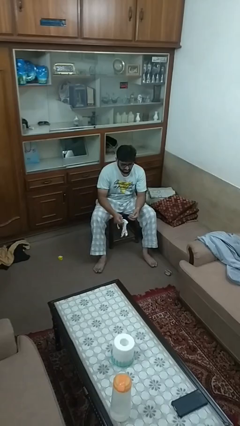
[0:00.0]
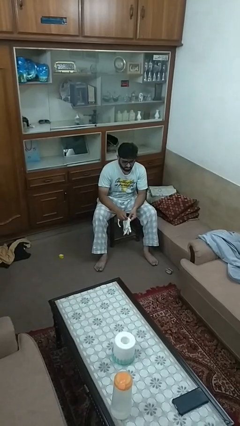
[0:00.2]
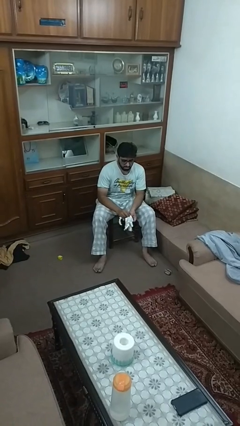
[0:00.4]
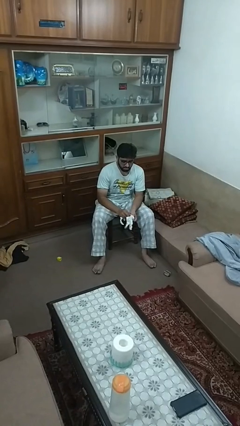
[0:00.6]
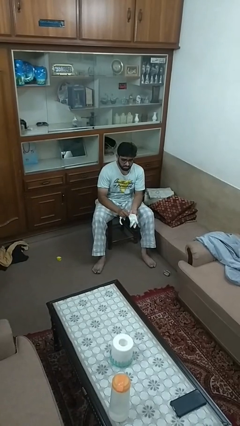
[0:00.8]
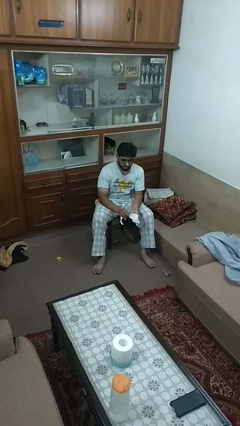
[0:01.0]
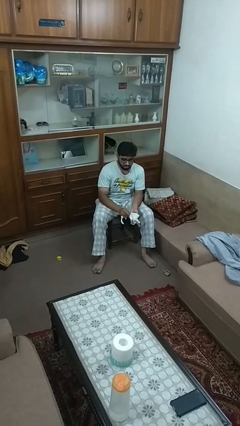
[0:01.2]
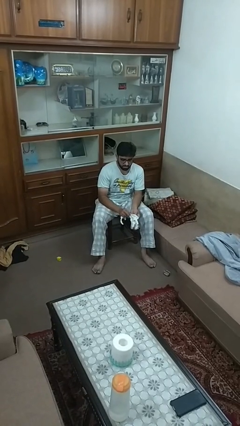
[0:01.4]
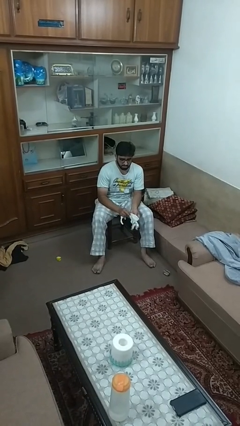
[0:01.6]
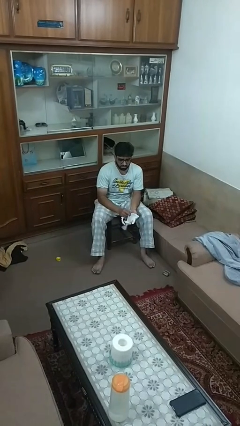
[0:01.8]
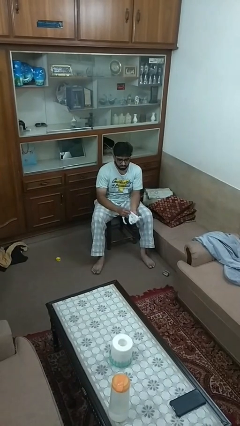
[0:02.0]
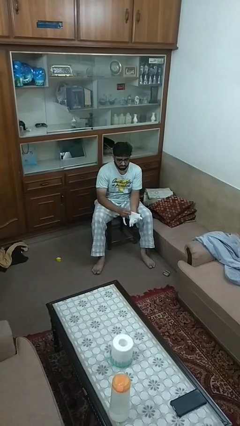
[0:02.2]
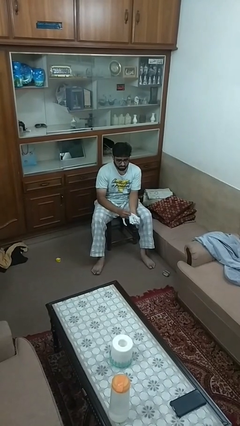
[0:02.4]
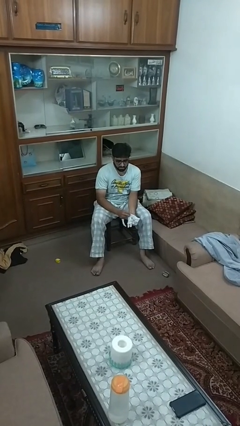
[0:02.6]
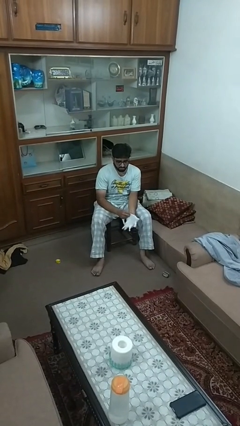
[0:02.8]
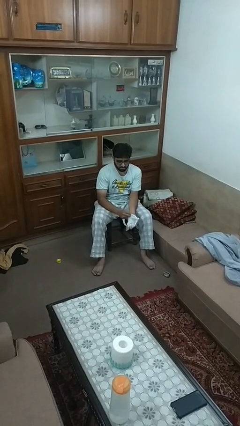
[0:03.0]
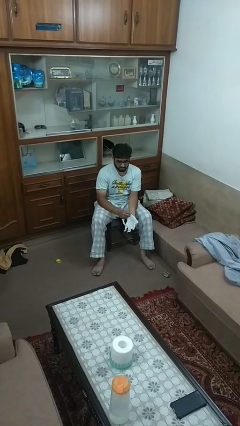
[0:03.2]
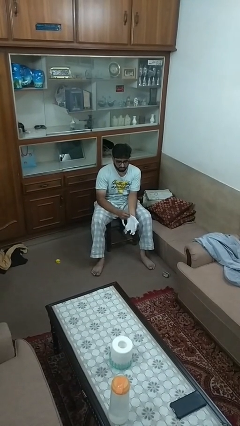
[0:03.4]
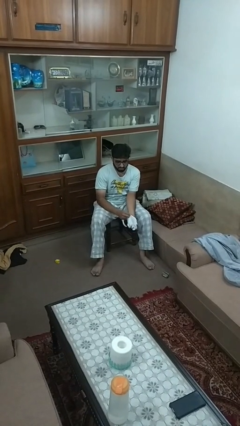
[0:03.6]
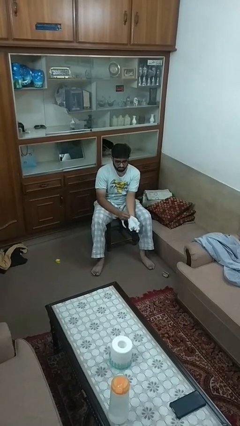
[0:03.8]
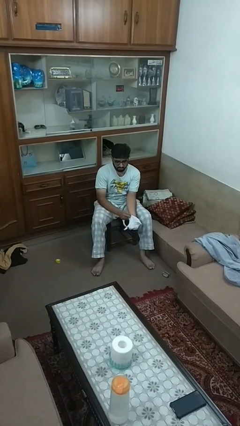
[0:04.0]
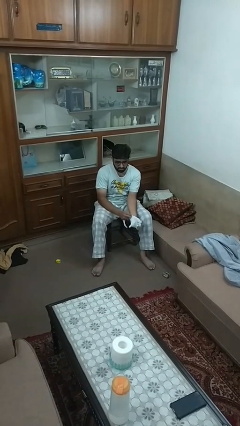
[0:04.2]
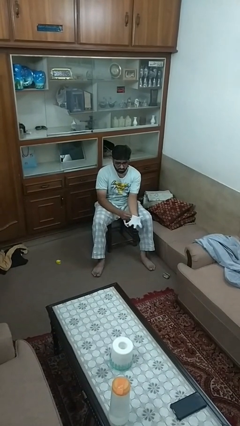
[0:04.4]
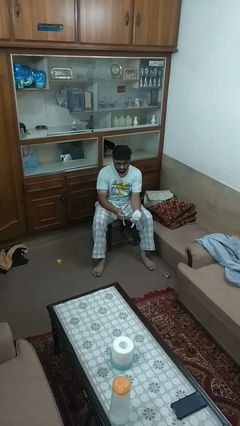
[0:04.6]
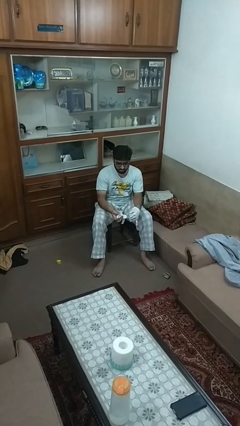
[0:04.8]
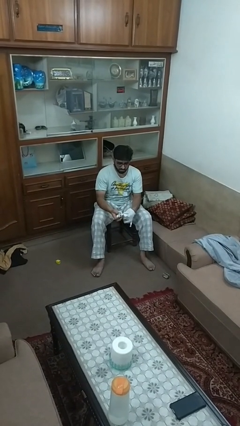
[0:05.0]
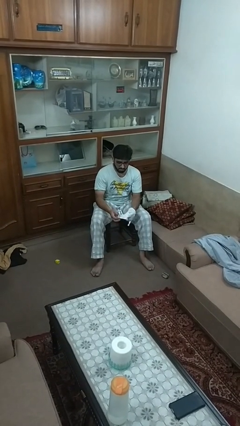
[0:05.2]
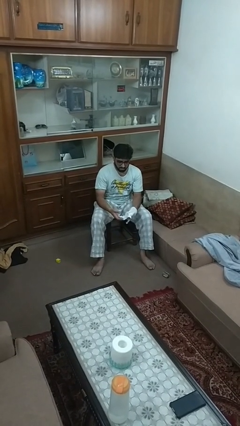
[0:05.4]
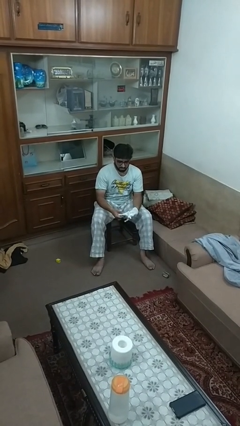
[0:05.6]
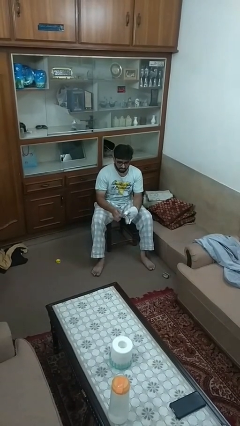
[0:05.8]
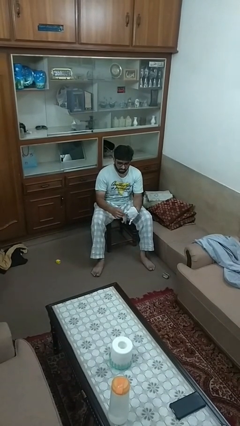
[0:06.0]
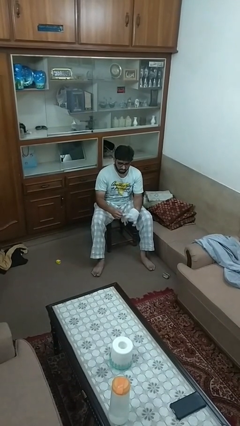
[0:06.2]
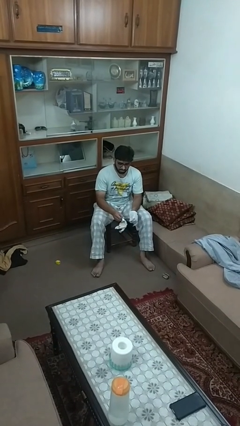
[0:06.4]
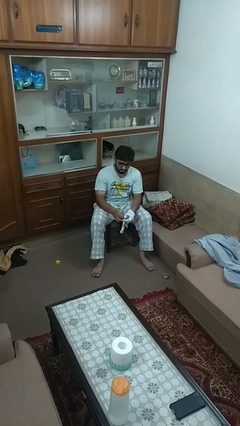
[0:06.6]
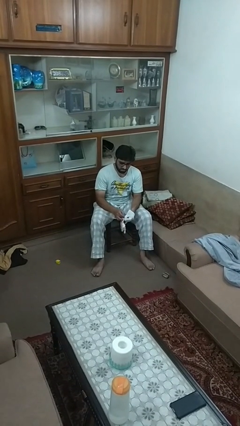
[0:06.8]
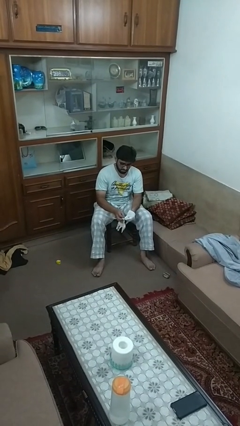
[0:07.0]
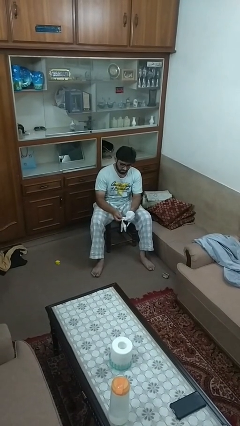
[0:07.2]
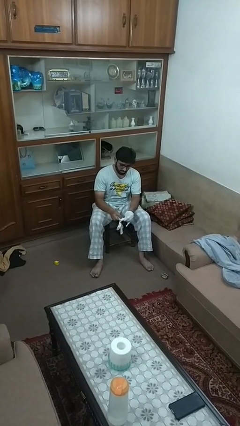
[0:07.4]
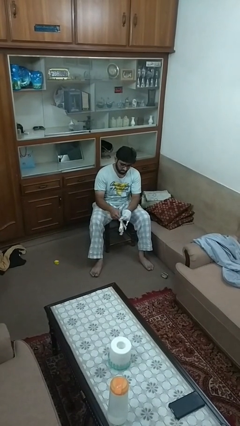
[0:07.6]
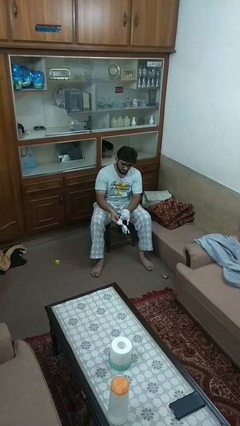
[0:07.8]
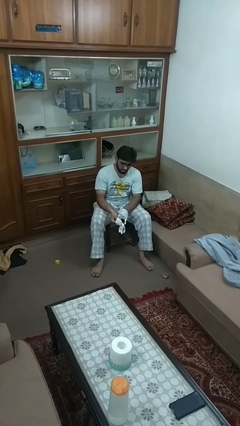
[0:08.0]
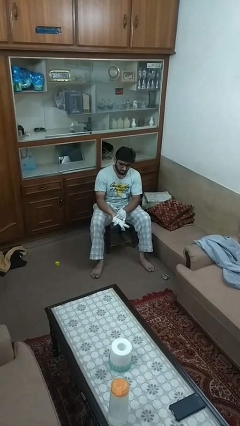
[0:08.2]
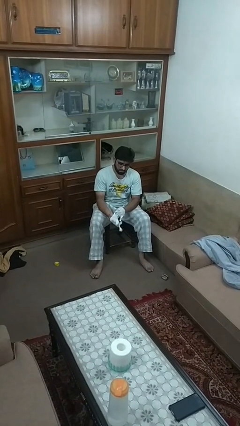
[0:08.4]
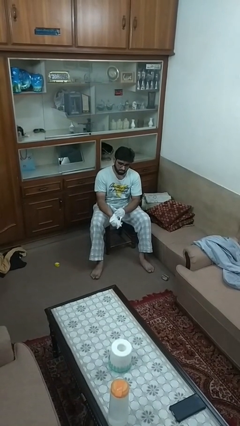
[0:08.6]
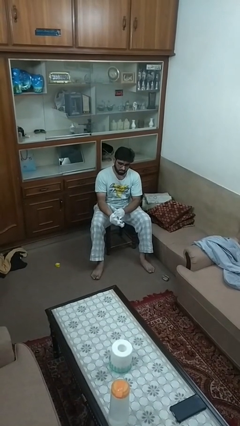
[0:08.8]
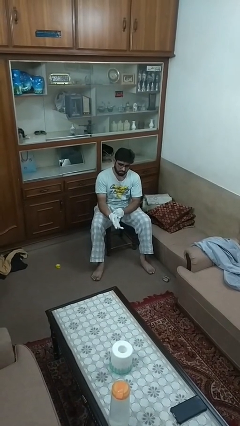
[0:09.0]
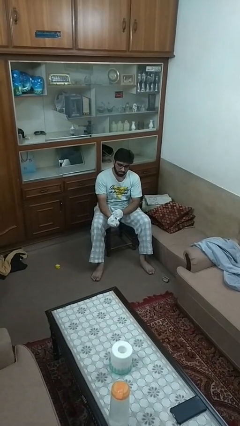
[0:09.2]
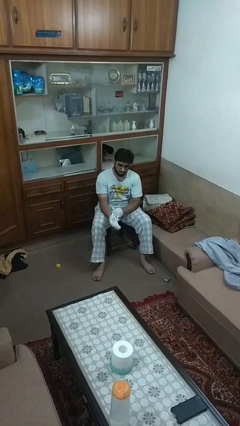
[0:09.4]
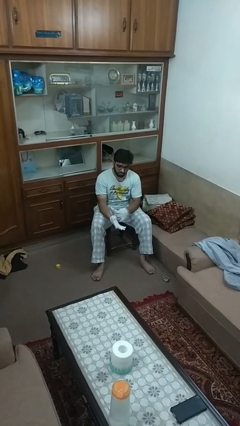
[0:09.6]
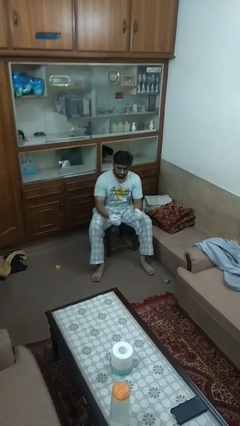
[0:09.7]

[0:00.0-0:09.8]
person puts on gloves

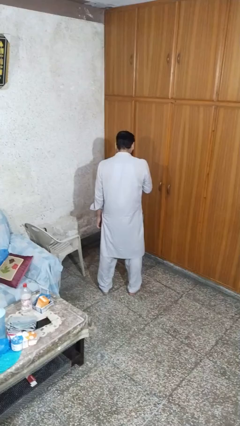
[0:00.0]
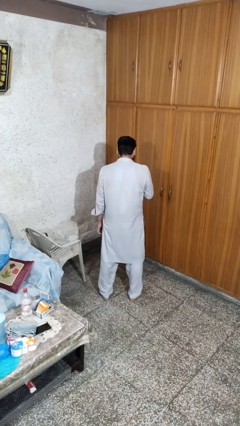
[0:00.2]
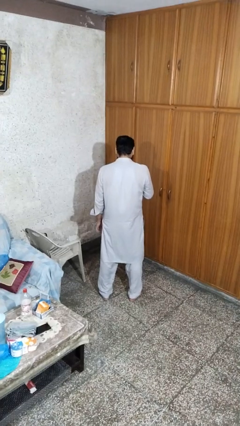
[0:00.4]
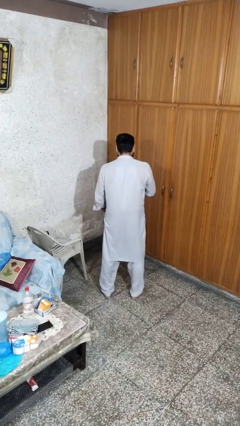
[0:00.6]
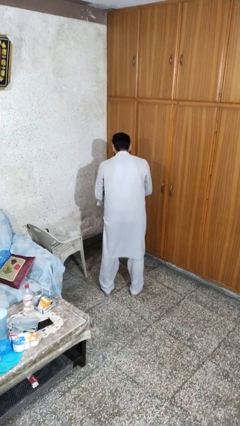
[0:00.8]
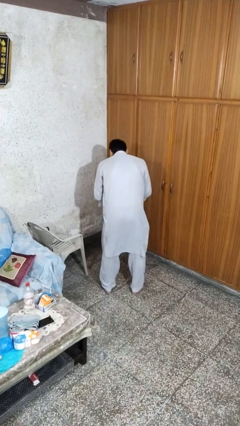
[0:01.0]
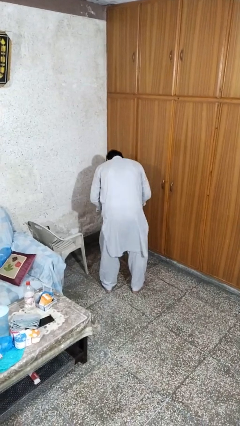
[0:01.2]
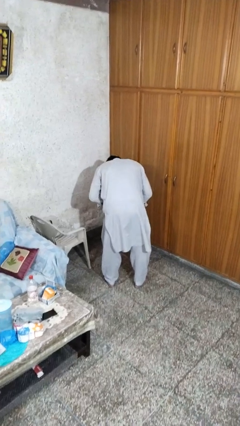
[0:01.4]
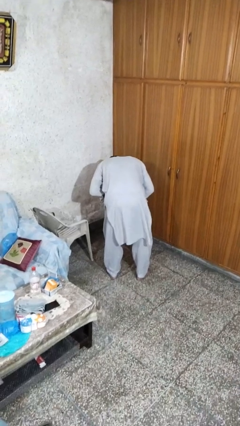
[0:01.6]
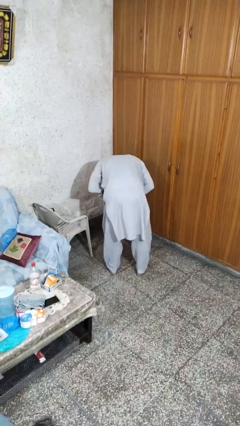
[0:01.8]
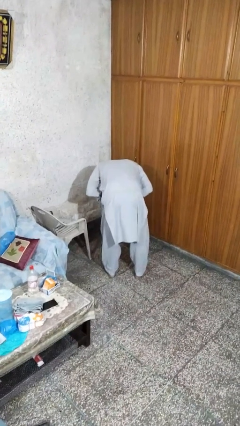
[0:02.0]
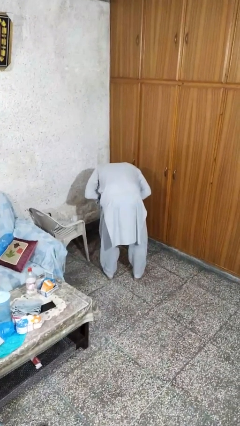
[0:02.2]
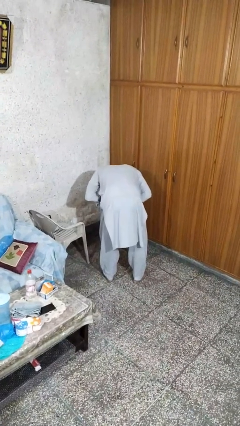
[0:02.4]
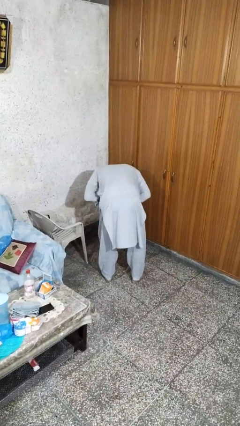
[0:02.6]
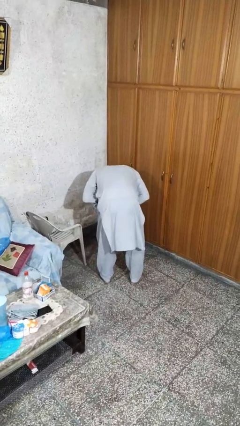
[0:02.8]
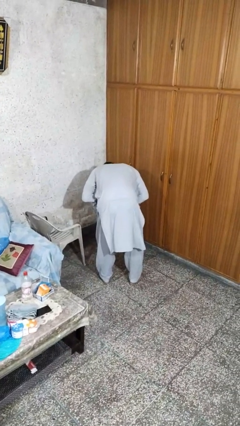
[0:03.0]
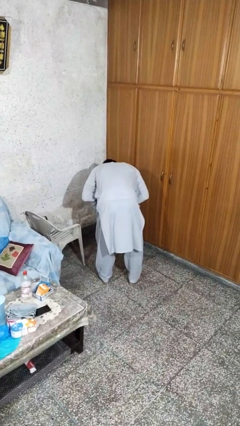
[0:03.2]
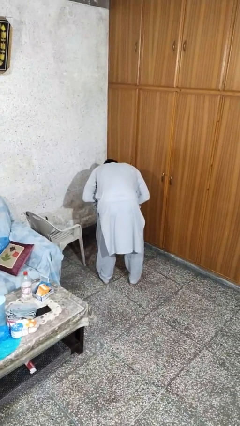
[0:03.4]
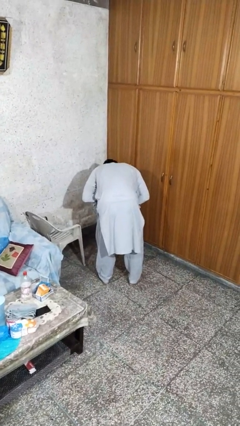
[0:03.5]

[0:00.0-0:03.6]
person bows

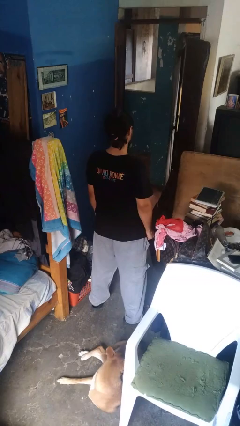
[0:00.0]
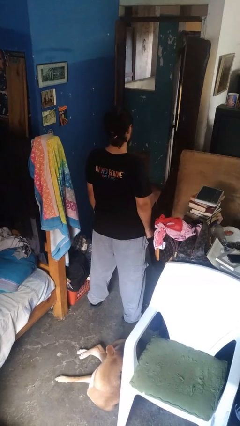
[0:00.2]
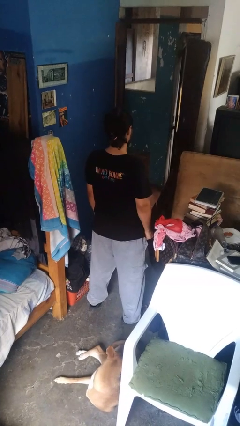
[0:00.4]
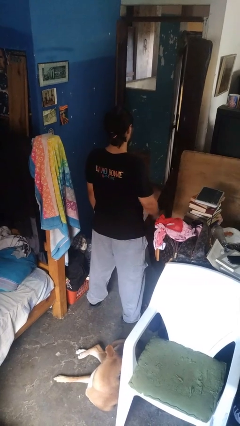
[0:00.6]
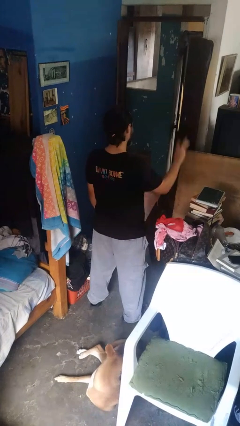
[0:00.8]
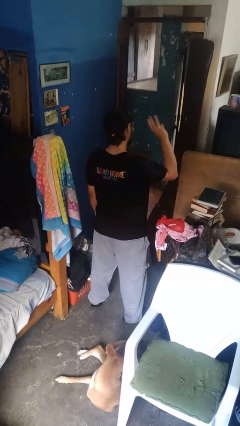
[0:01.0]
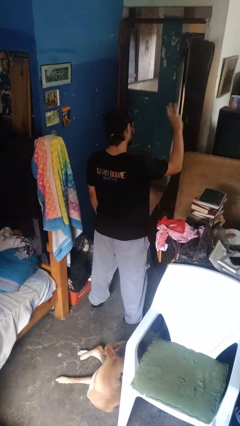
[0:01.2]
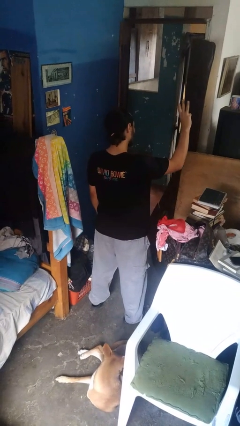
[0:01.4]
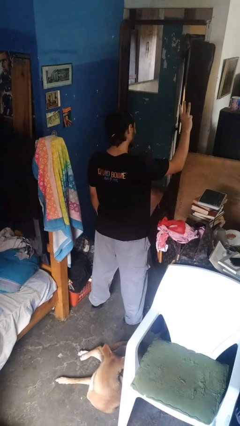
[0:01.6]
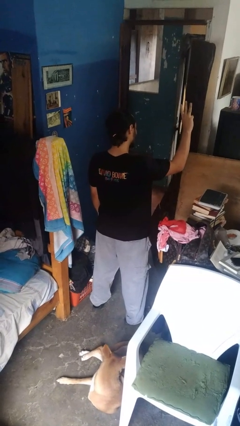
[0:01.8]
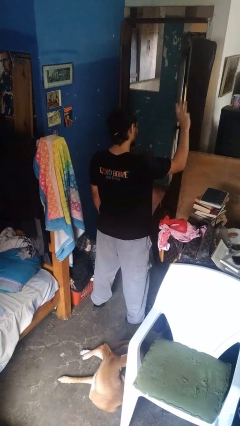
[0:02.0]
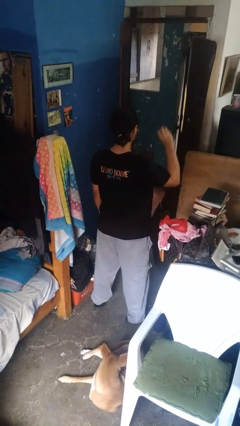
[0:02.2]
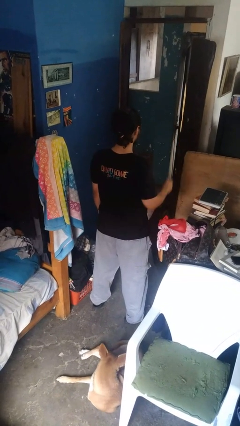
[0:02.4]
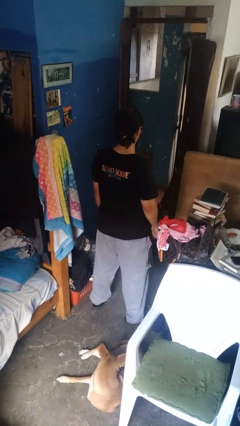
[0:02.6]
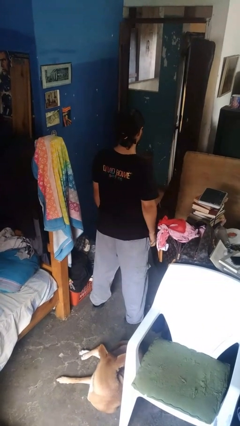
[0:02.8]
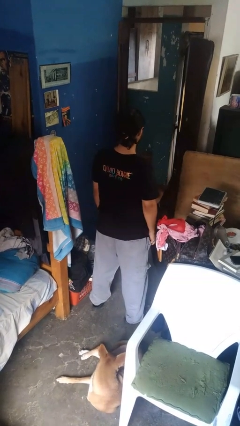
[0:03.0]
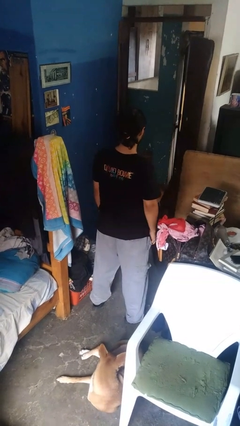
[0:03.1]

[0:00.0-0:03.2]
person gestures number three

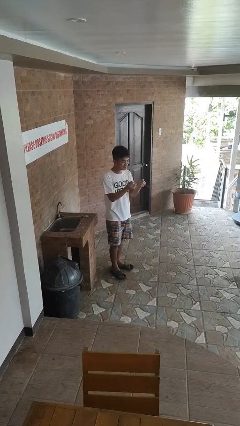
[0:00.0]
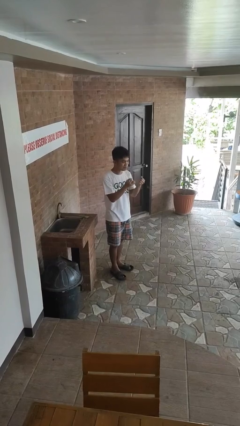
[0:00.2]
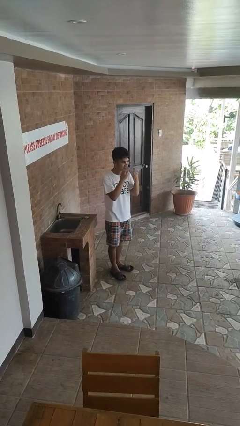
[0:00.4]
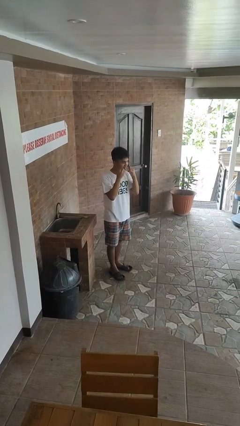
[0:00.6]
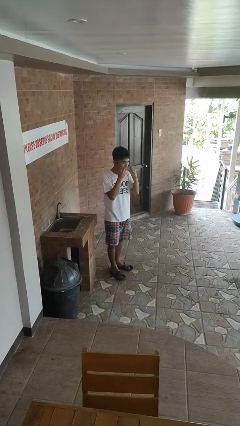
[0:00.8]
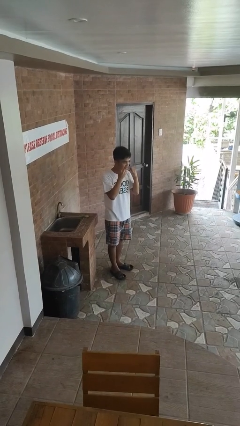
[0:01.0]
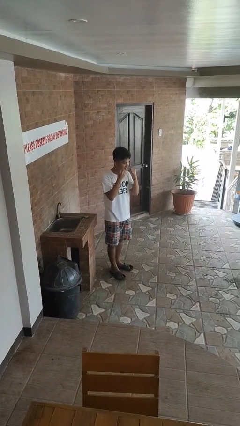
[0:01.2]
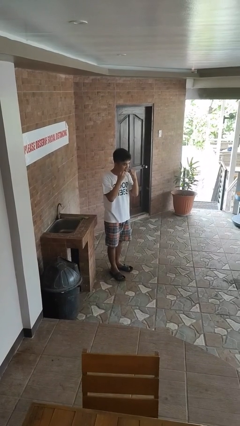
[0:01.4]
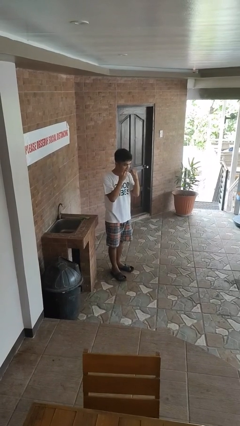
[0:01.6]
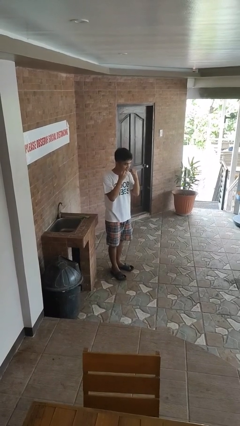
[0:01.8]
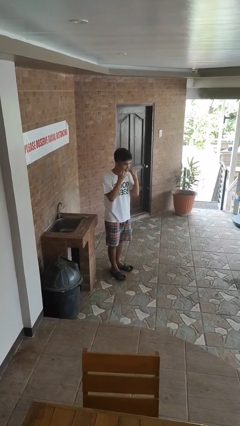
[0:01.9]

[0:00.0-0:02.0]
person flosses
